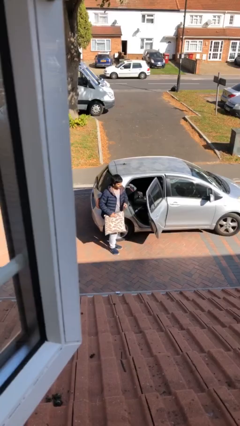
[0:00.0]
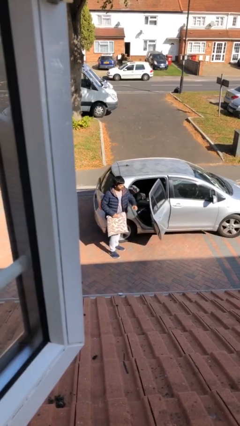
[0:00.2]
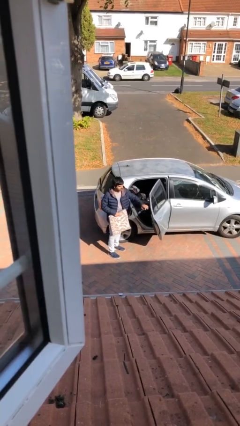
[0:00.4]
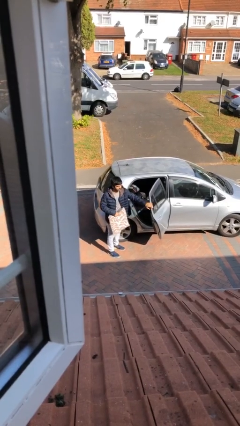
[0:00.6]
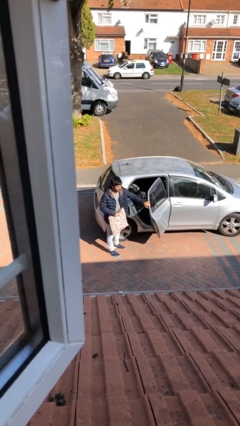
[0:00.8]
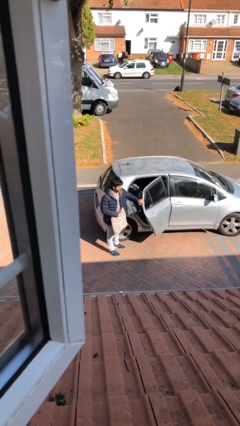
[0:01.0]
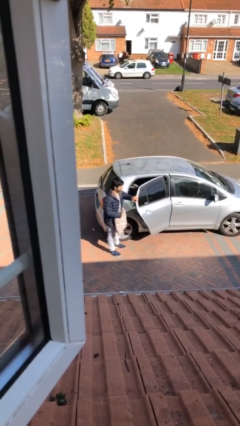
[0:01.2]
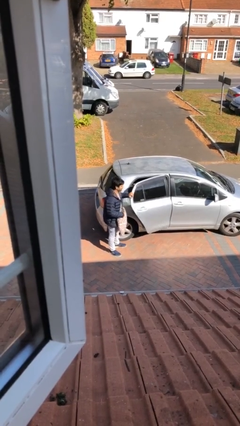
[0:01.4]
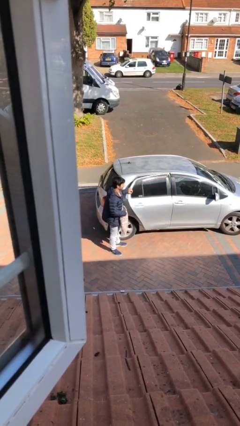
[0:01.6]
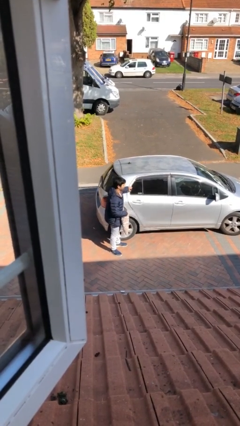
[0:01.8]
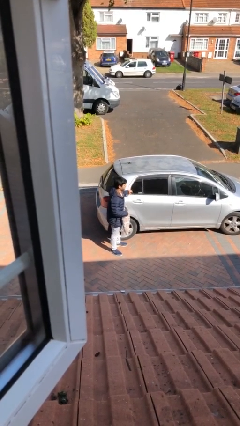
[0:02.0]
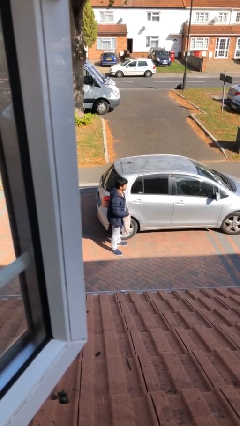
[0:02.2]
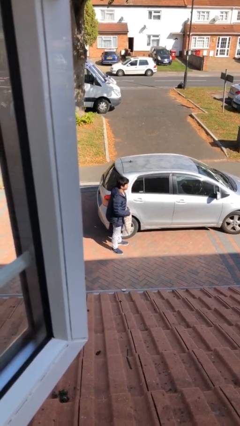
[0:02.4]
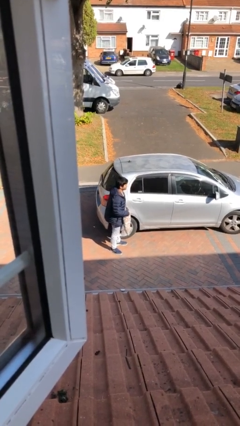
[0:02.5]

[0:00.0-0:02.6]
person closes car door

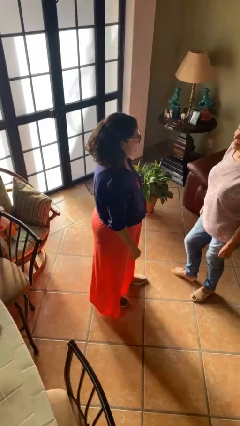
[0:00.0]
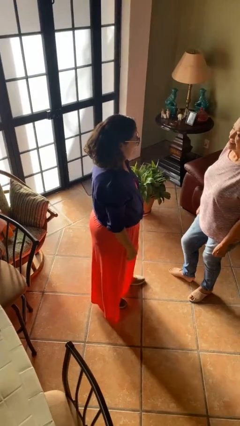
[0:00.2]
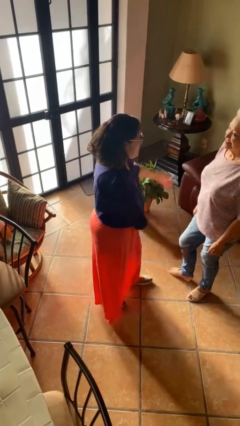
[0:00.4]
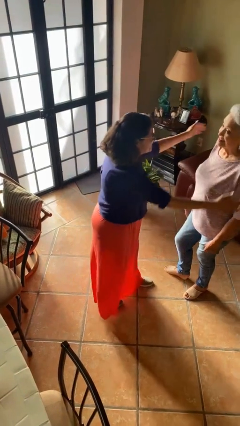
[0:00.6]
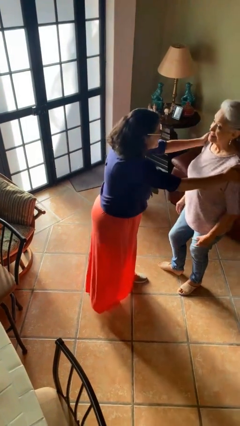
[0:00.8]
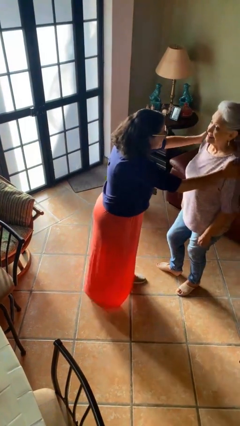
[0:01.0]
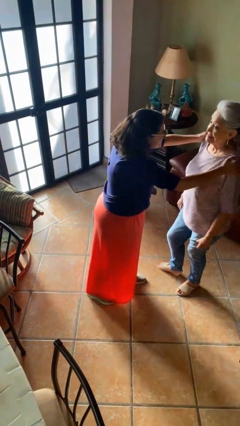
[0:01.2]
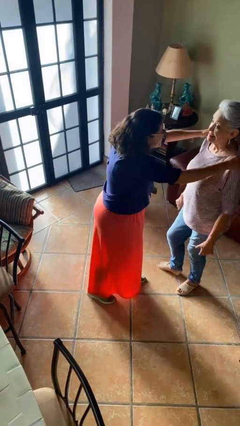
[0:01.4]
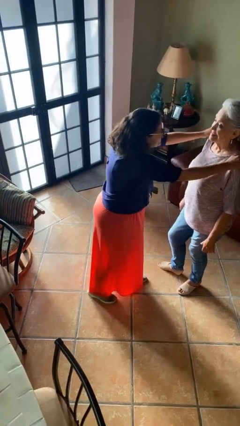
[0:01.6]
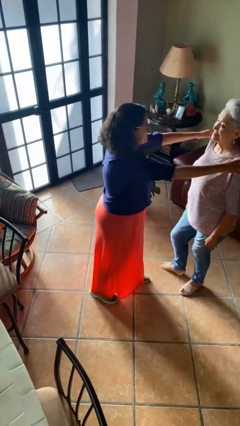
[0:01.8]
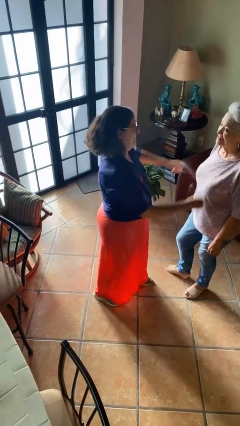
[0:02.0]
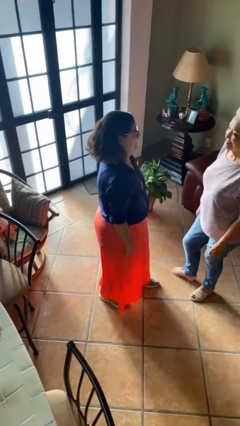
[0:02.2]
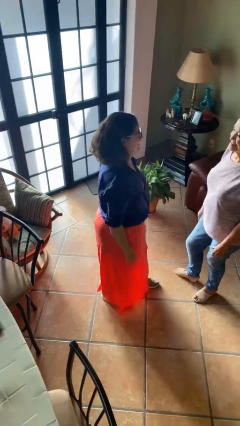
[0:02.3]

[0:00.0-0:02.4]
person pounds shoulders of person

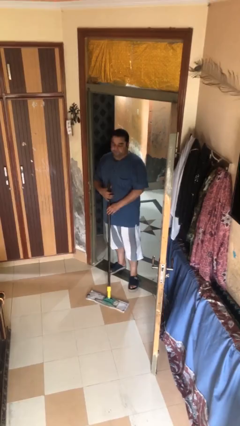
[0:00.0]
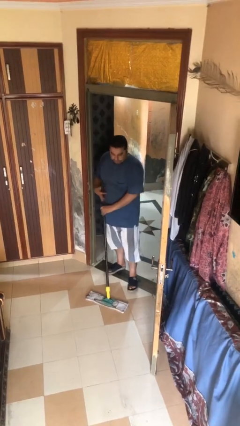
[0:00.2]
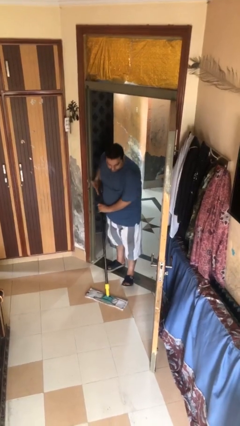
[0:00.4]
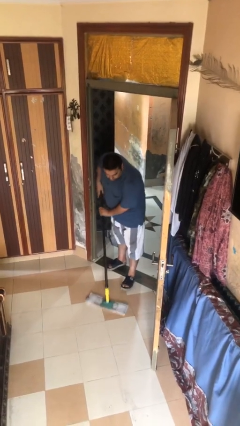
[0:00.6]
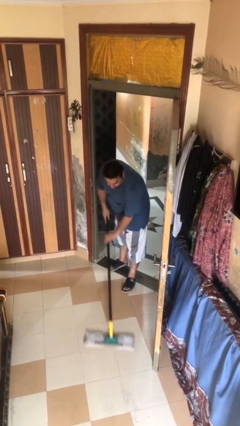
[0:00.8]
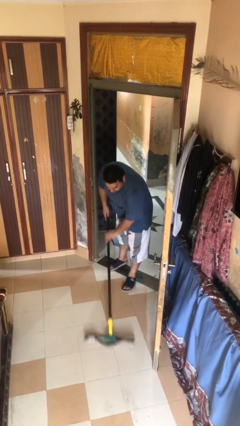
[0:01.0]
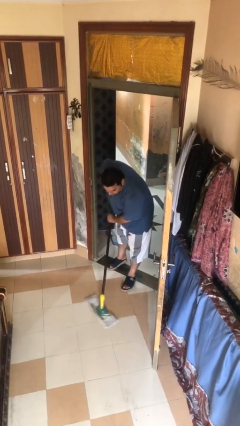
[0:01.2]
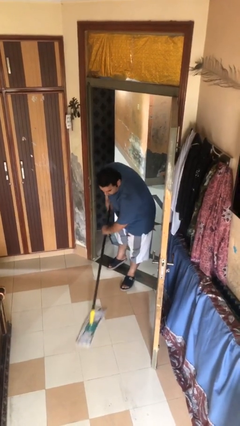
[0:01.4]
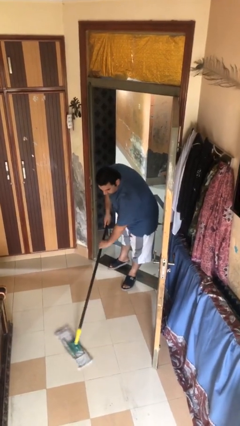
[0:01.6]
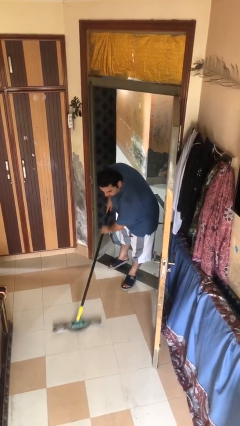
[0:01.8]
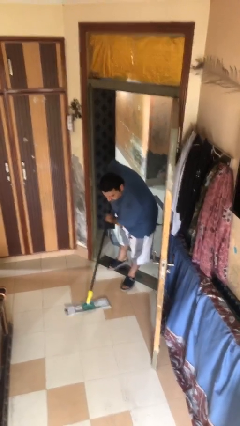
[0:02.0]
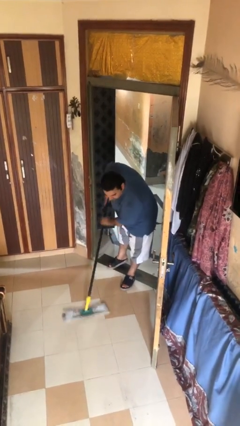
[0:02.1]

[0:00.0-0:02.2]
person mops

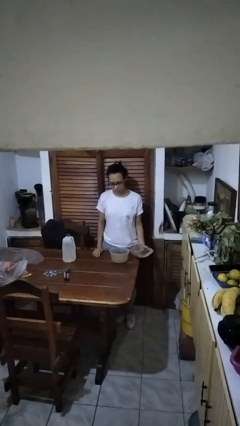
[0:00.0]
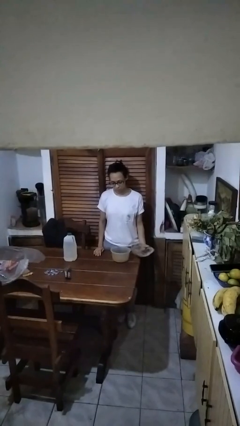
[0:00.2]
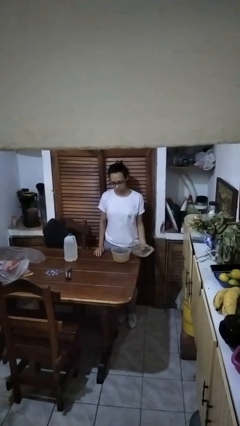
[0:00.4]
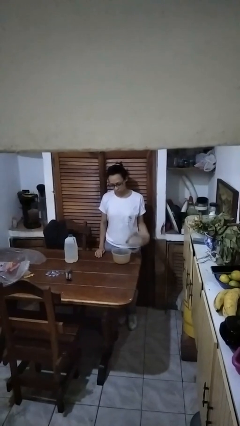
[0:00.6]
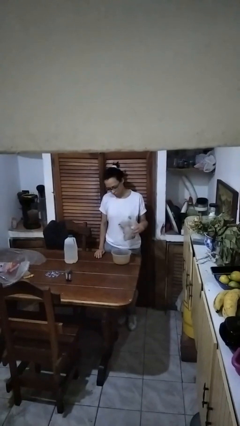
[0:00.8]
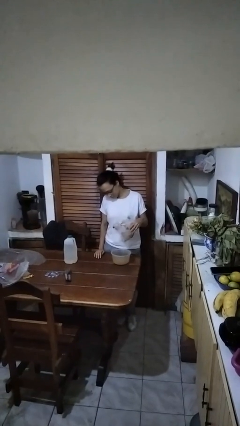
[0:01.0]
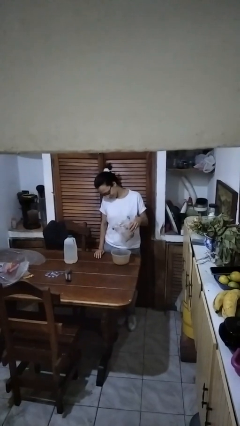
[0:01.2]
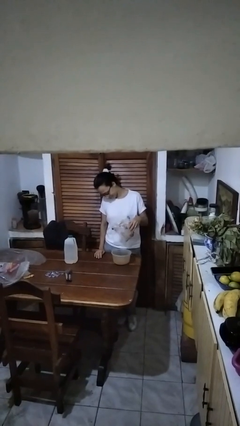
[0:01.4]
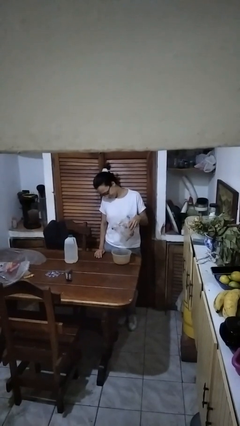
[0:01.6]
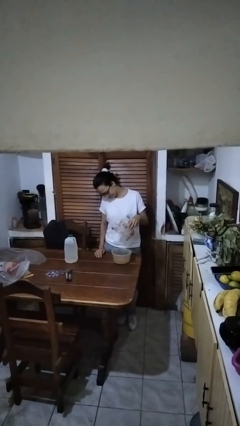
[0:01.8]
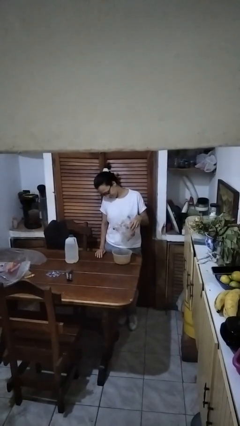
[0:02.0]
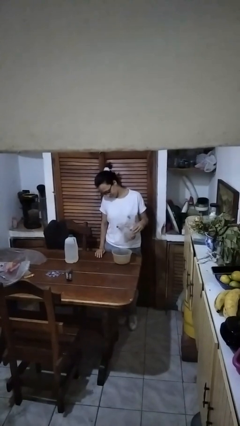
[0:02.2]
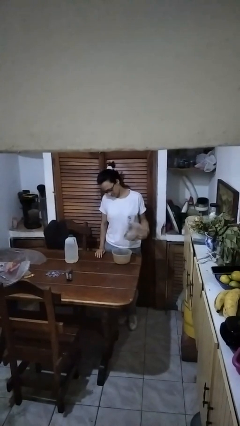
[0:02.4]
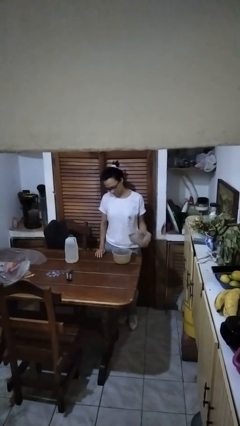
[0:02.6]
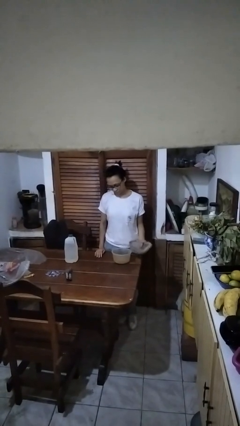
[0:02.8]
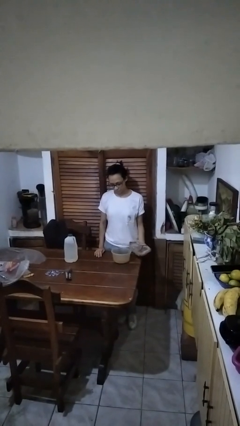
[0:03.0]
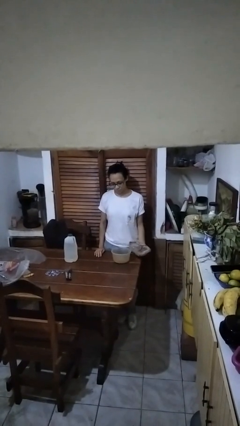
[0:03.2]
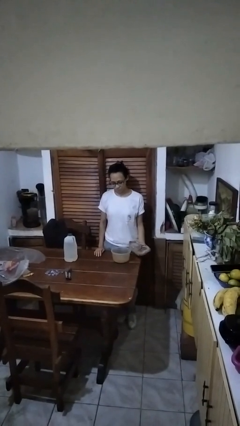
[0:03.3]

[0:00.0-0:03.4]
person pours into bowl

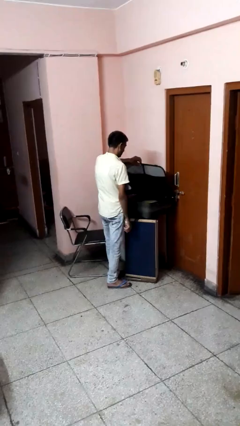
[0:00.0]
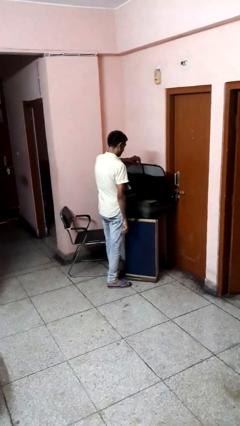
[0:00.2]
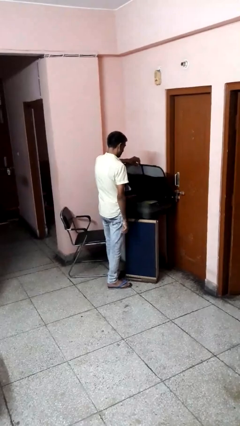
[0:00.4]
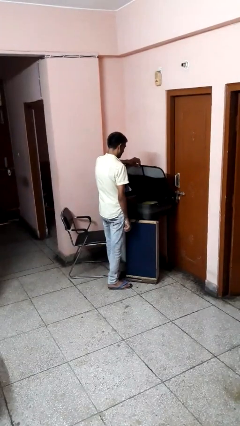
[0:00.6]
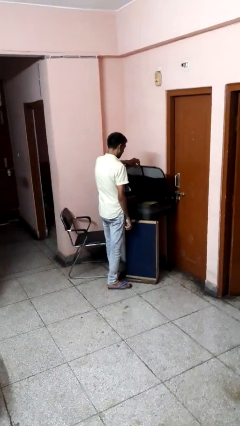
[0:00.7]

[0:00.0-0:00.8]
person opens suitcase

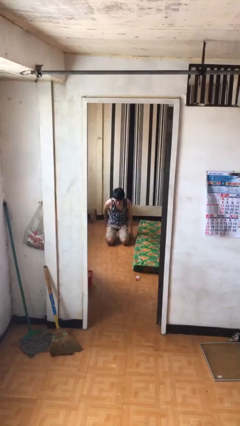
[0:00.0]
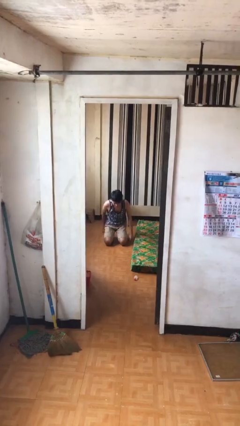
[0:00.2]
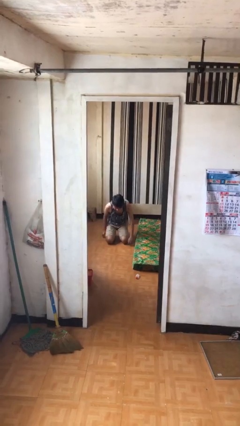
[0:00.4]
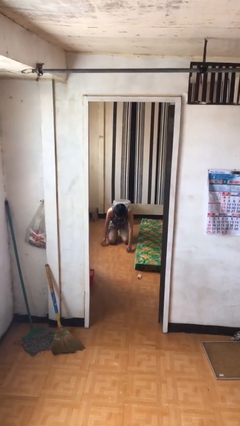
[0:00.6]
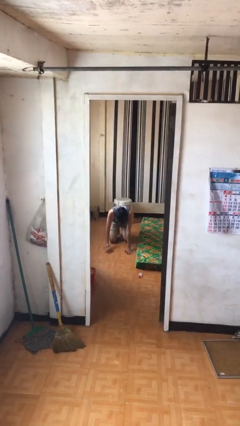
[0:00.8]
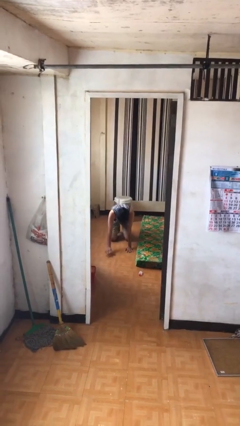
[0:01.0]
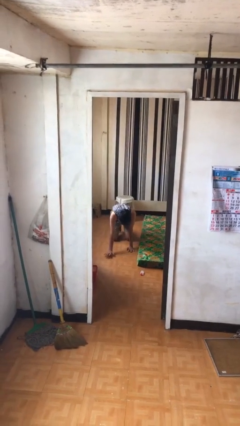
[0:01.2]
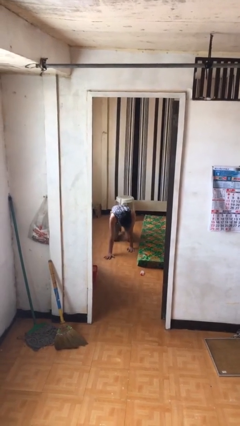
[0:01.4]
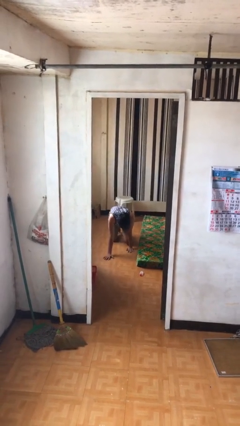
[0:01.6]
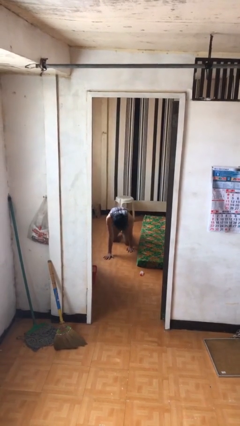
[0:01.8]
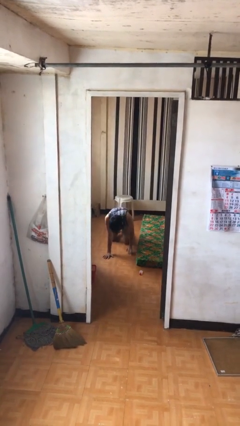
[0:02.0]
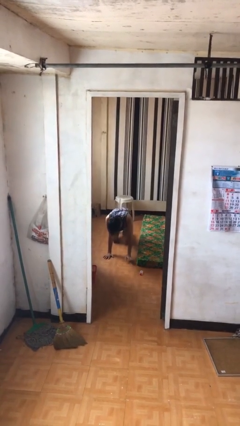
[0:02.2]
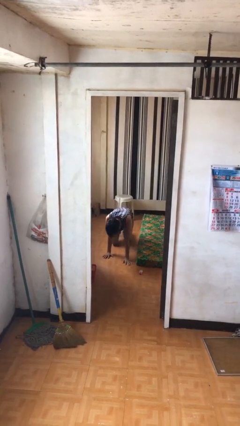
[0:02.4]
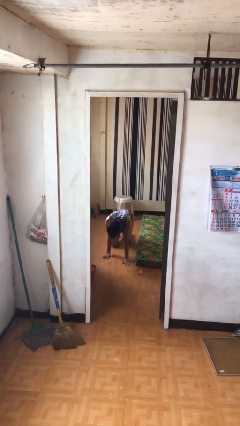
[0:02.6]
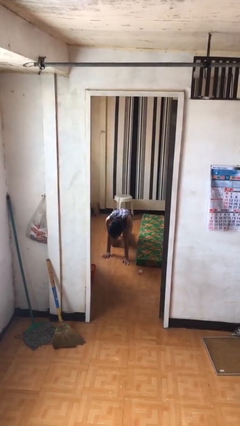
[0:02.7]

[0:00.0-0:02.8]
person crawls

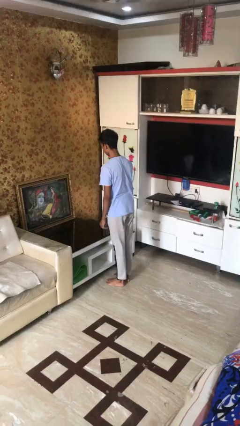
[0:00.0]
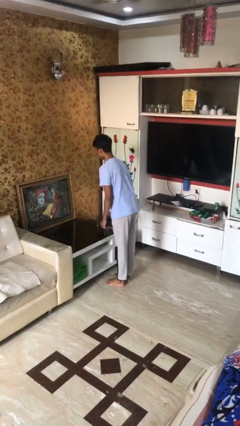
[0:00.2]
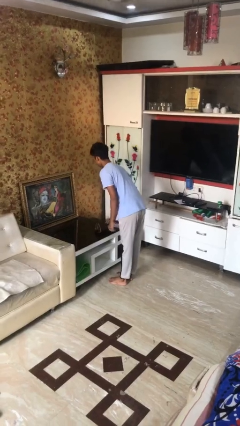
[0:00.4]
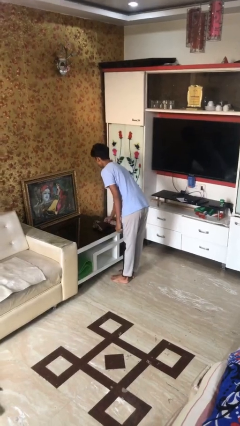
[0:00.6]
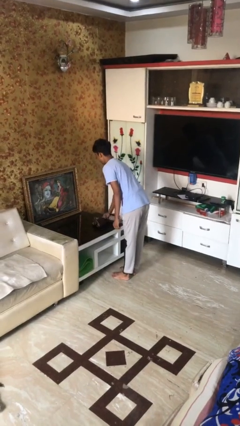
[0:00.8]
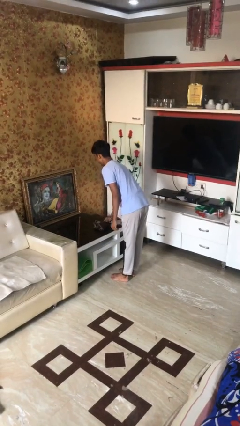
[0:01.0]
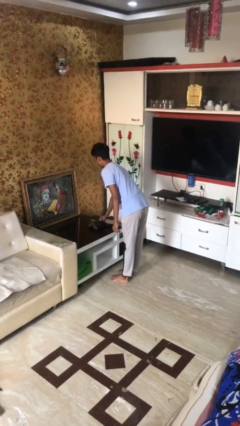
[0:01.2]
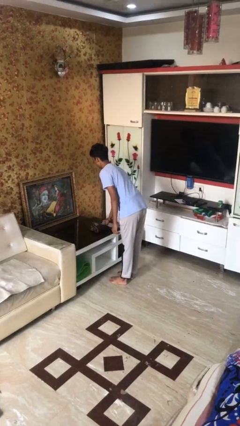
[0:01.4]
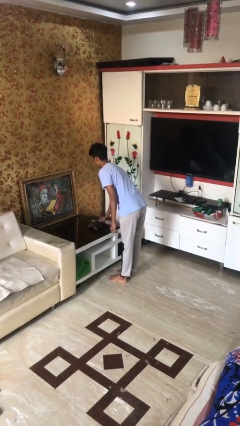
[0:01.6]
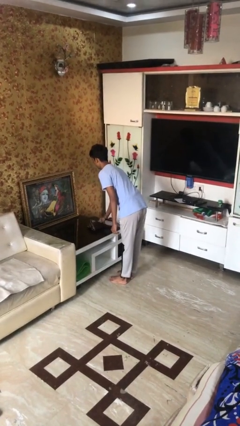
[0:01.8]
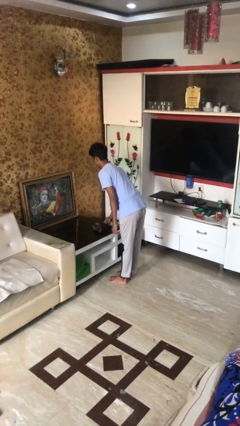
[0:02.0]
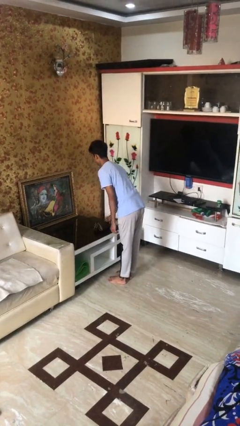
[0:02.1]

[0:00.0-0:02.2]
person cleans table with rag

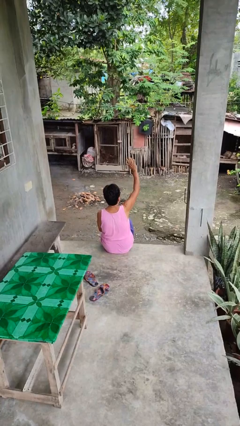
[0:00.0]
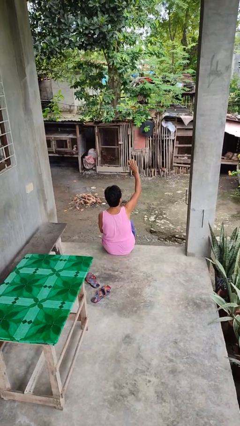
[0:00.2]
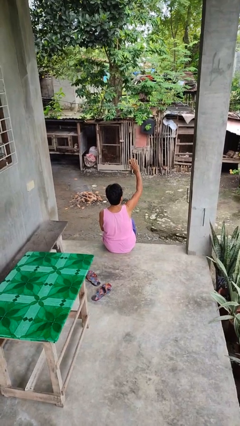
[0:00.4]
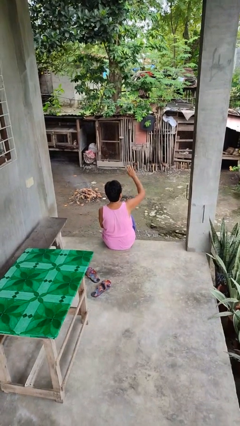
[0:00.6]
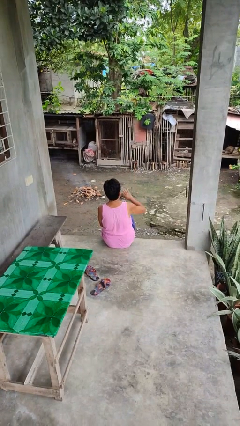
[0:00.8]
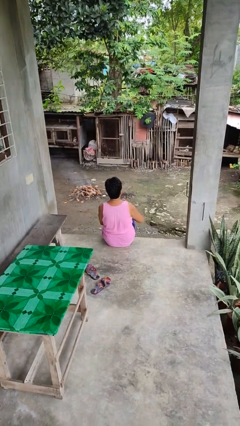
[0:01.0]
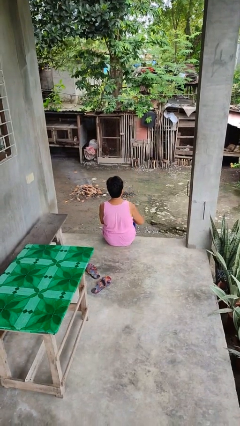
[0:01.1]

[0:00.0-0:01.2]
person gestures swipe down
